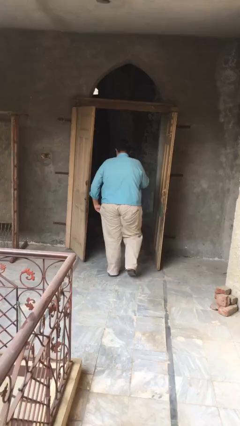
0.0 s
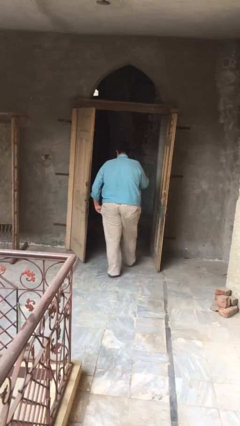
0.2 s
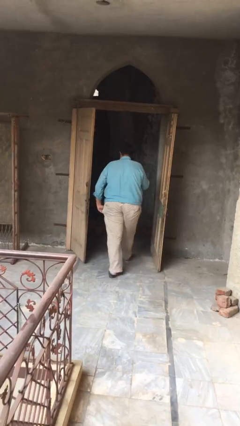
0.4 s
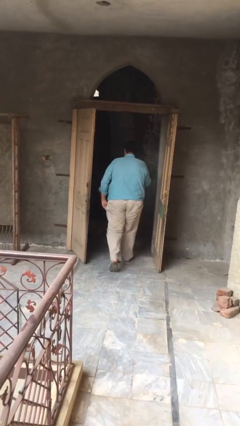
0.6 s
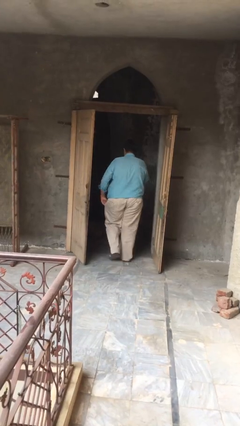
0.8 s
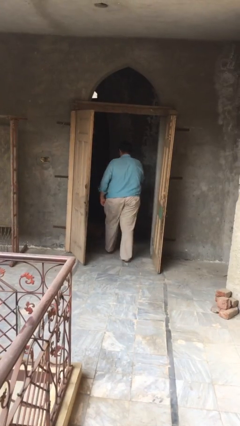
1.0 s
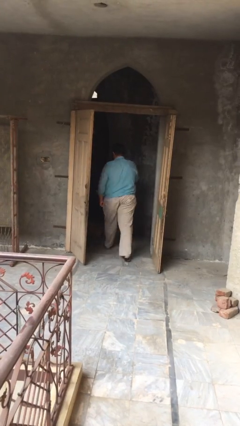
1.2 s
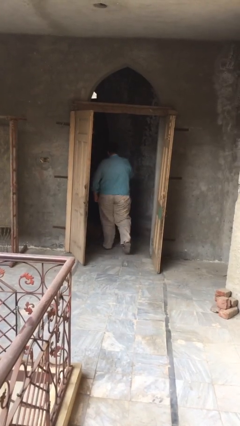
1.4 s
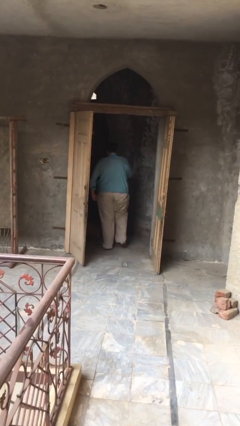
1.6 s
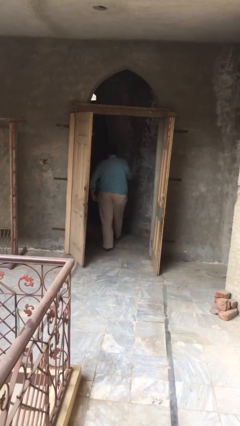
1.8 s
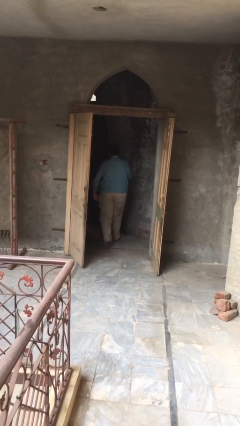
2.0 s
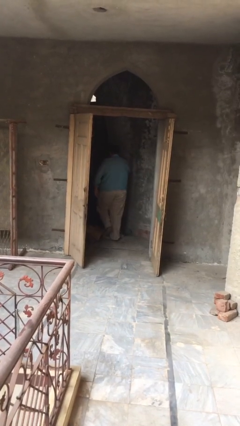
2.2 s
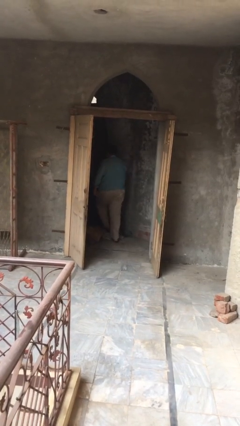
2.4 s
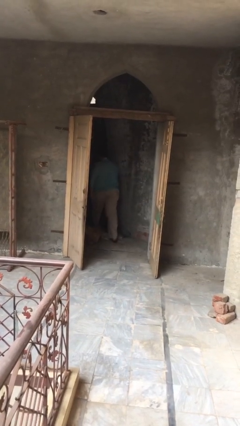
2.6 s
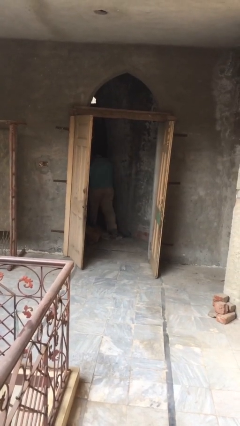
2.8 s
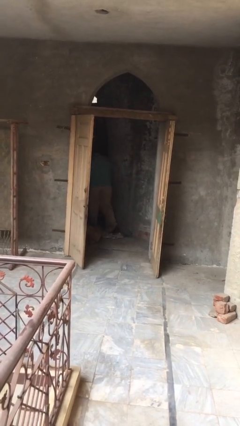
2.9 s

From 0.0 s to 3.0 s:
person exits scene through structure

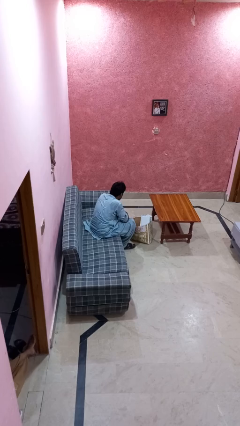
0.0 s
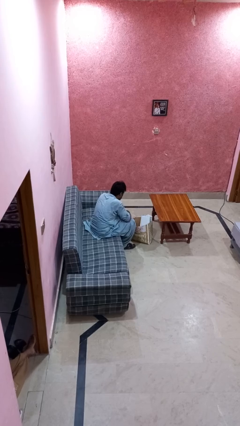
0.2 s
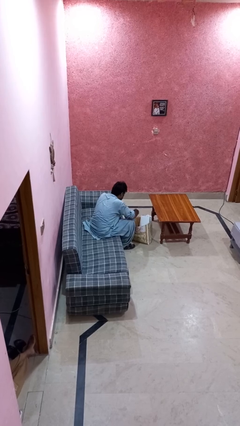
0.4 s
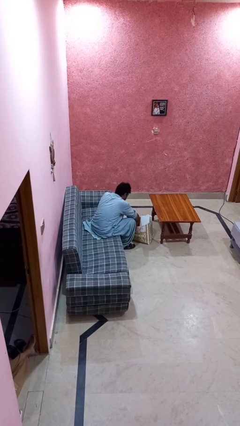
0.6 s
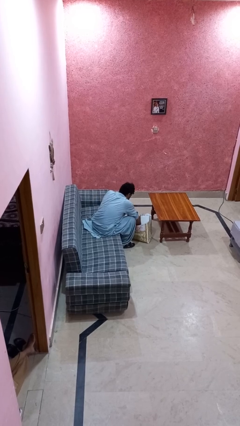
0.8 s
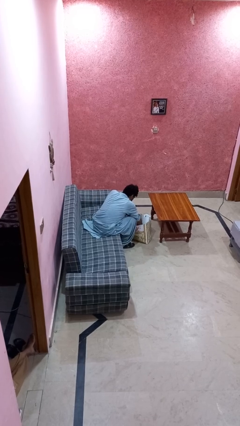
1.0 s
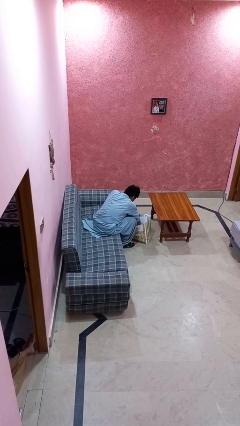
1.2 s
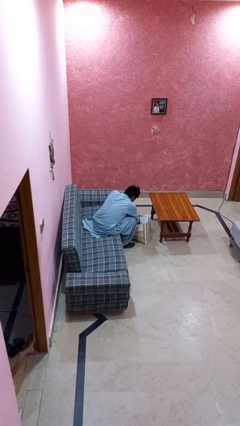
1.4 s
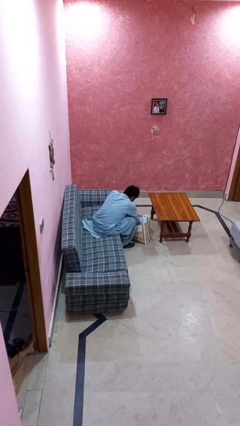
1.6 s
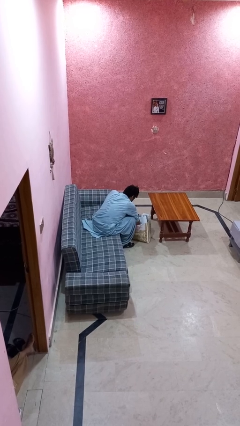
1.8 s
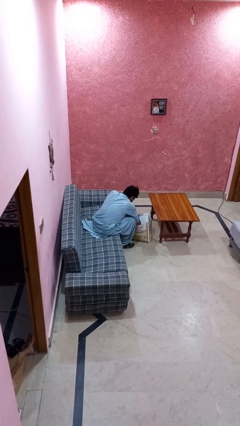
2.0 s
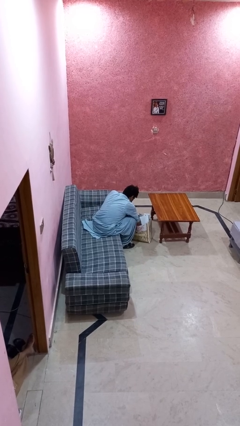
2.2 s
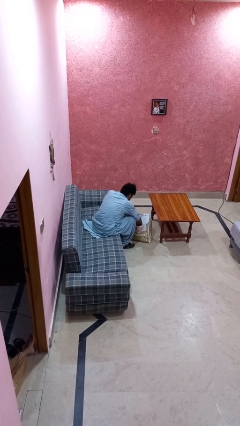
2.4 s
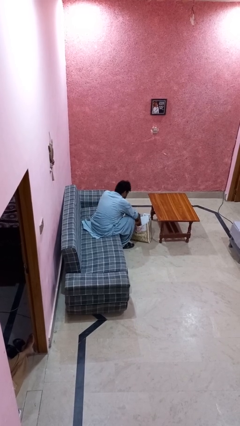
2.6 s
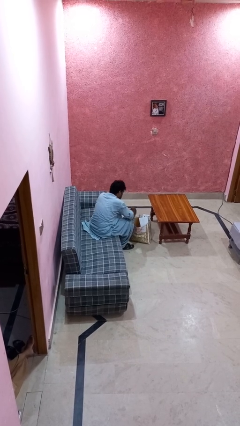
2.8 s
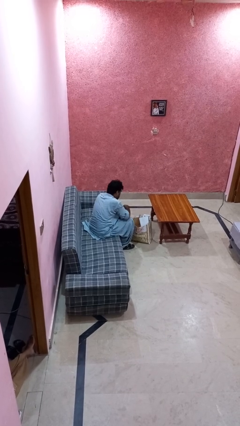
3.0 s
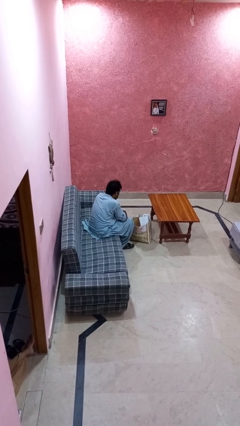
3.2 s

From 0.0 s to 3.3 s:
person searches in bag

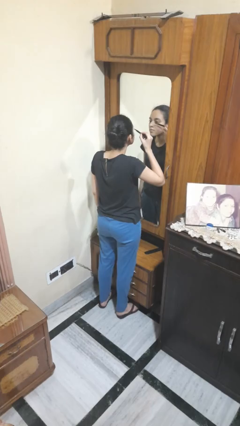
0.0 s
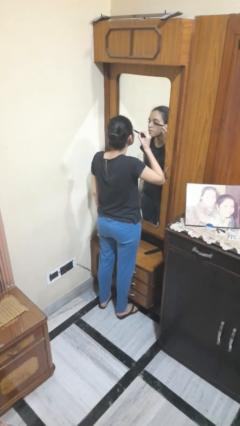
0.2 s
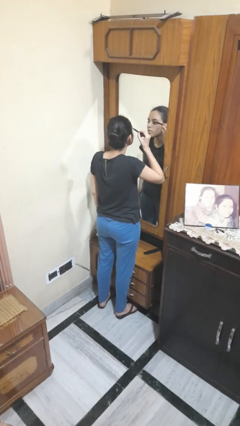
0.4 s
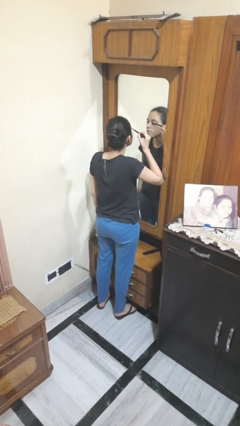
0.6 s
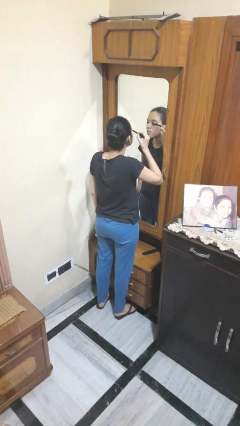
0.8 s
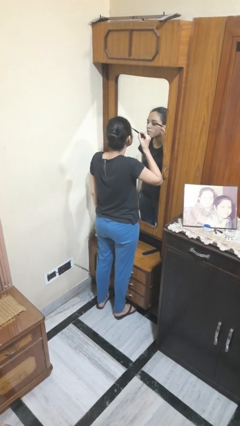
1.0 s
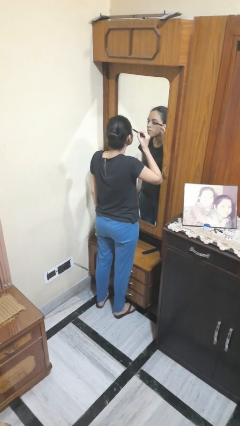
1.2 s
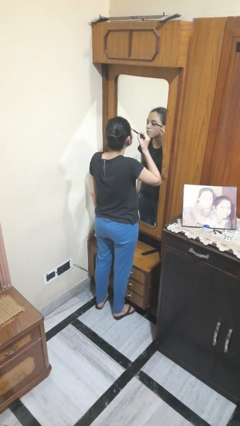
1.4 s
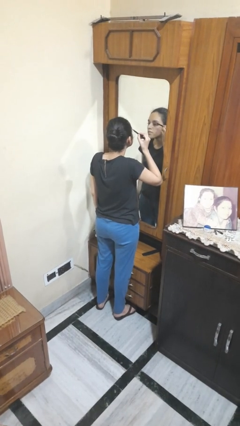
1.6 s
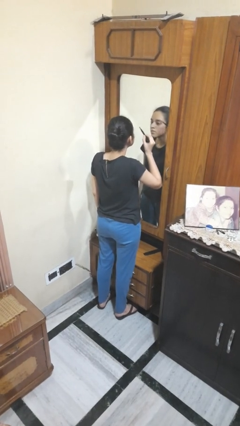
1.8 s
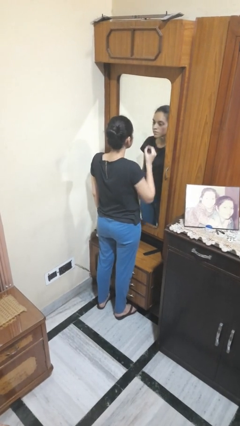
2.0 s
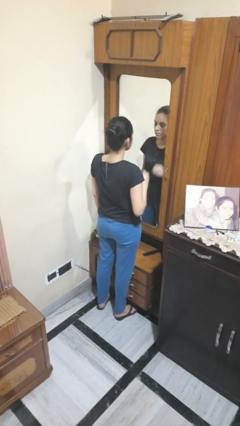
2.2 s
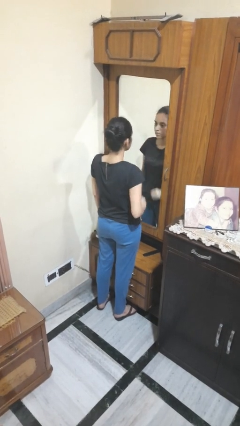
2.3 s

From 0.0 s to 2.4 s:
person applies eye makeup

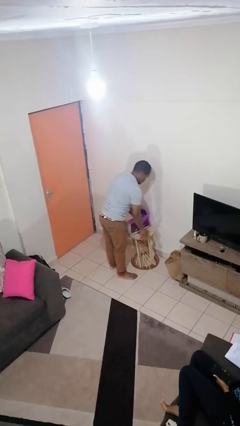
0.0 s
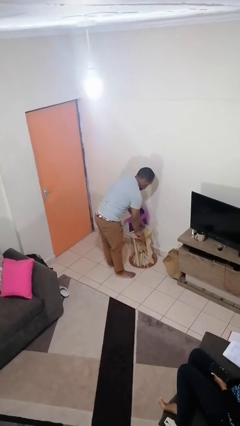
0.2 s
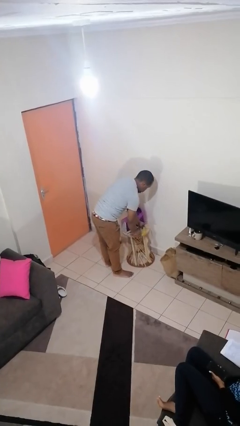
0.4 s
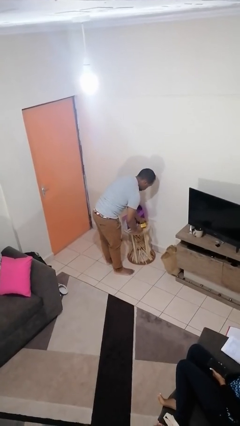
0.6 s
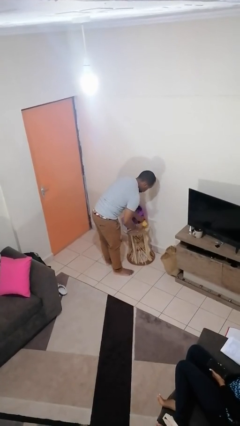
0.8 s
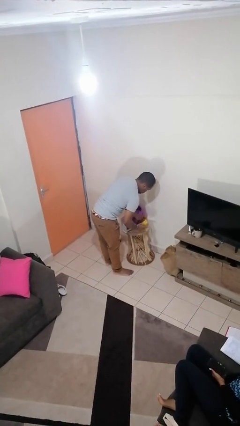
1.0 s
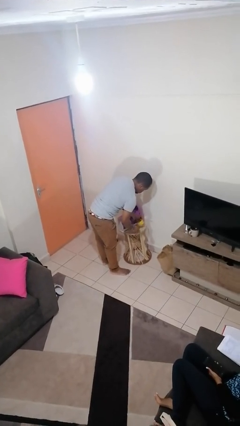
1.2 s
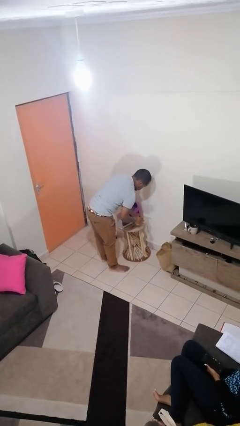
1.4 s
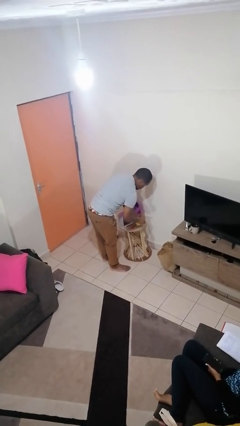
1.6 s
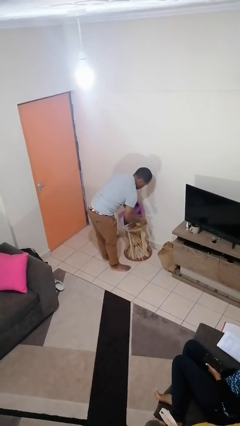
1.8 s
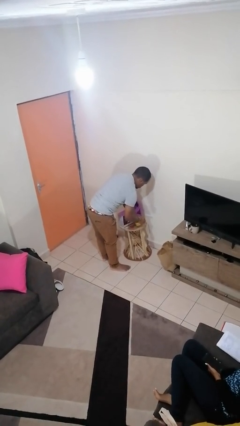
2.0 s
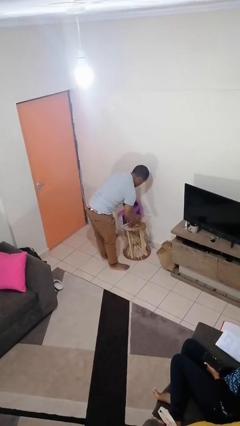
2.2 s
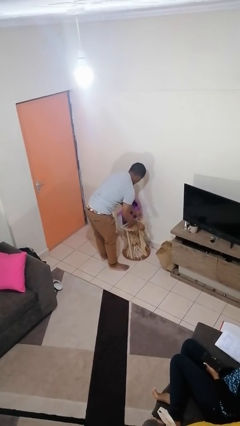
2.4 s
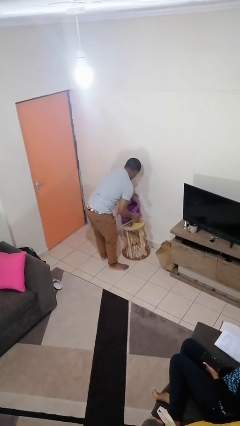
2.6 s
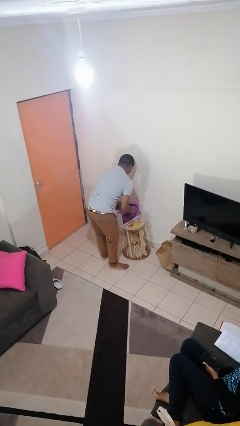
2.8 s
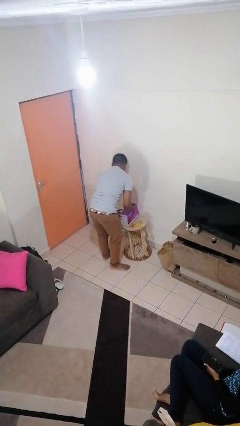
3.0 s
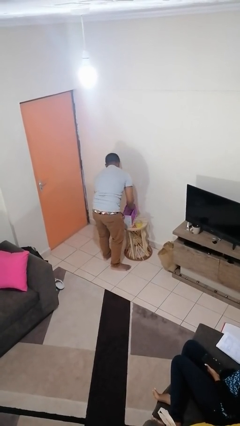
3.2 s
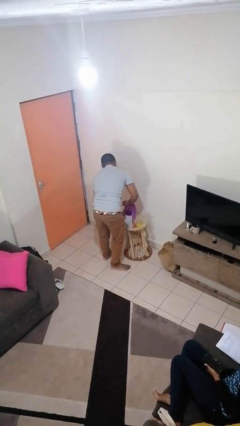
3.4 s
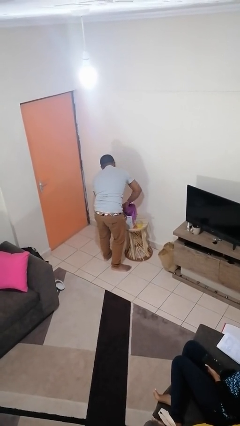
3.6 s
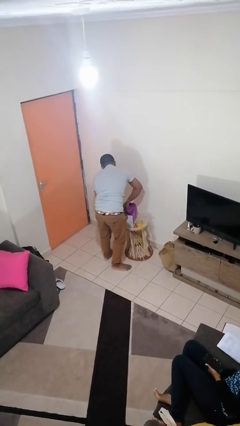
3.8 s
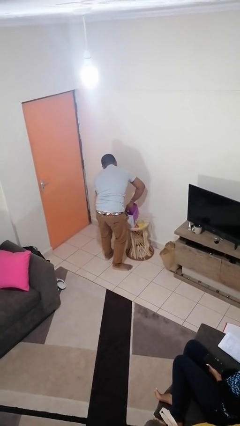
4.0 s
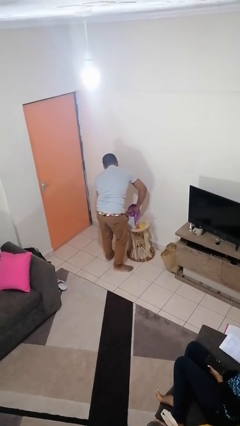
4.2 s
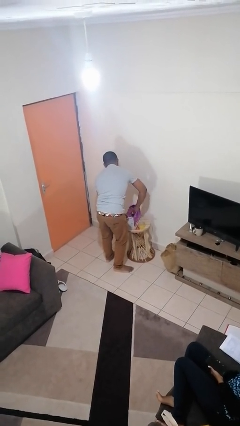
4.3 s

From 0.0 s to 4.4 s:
person wraps box

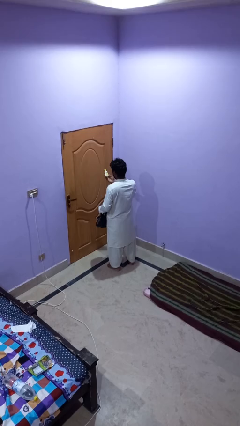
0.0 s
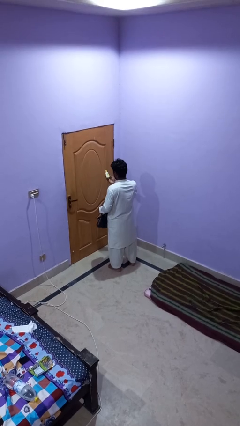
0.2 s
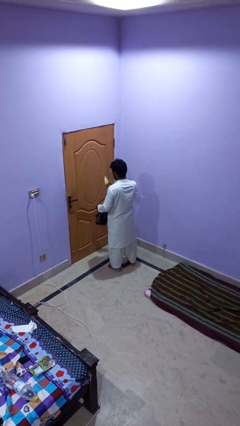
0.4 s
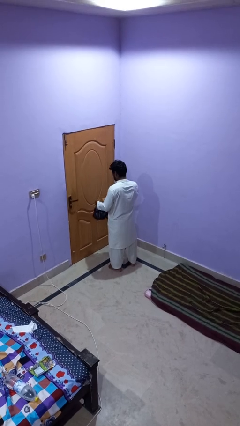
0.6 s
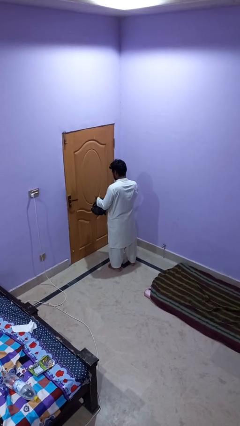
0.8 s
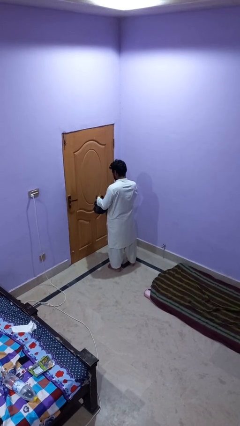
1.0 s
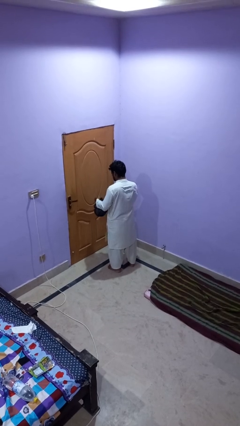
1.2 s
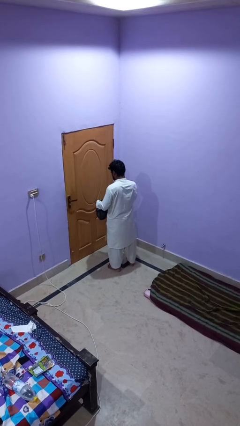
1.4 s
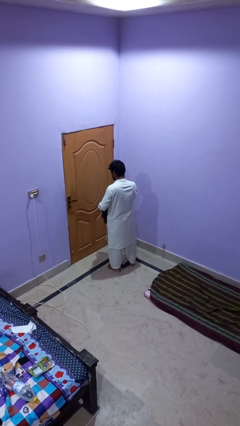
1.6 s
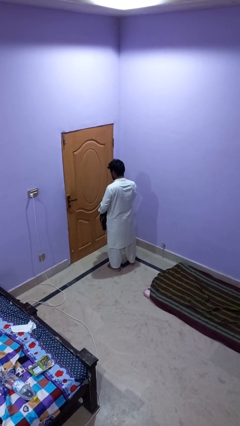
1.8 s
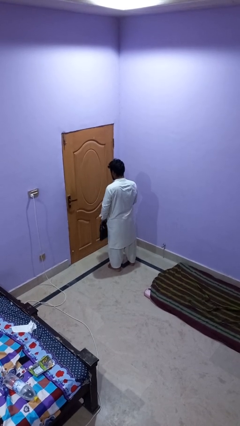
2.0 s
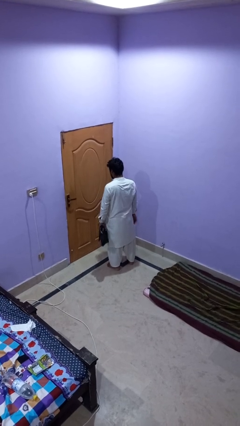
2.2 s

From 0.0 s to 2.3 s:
person puts object into purse

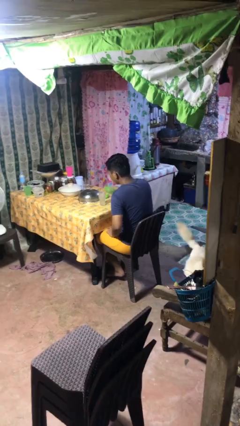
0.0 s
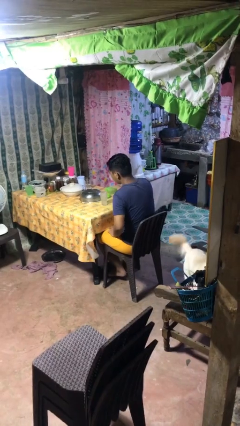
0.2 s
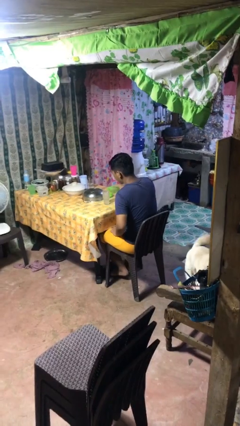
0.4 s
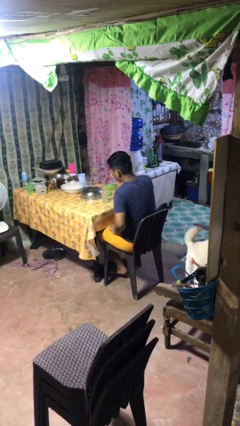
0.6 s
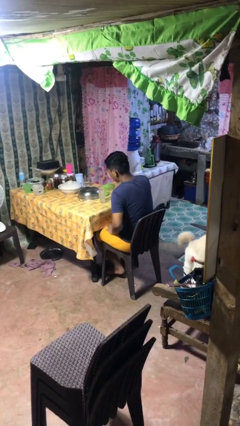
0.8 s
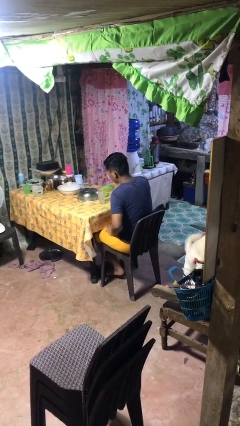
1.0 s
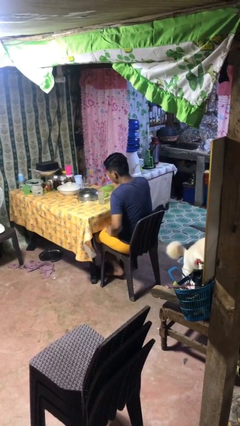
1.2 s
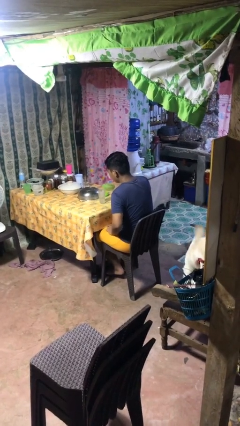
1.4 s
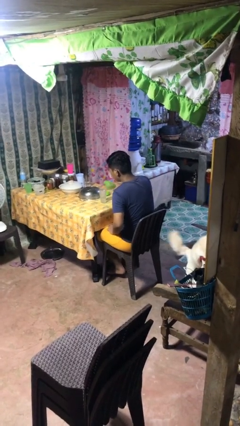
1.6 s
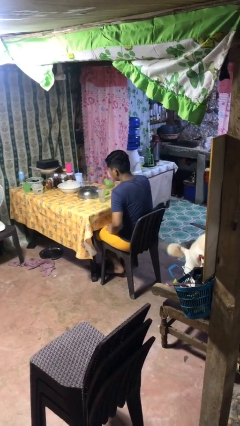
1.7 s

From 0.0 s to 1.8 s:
person pours liquid into cup

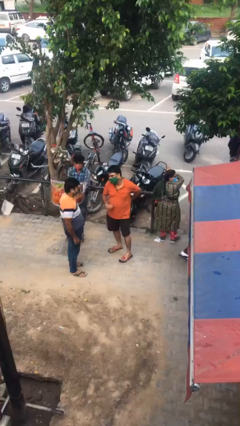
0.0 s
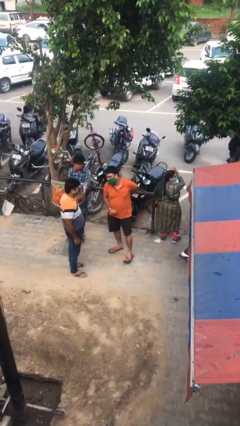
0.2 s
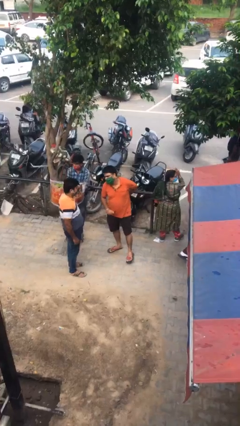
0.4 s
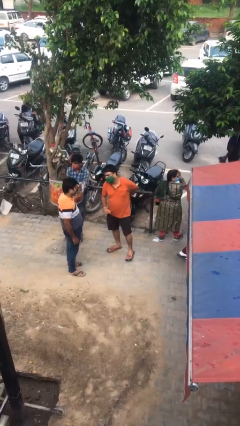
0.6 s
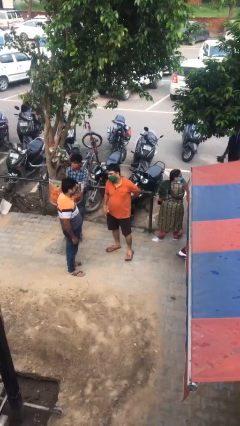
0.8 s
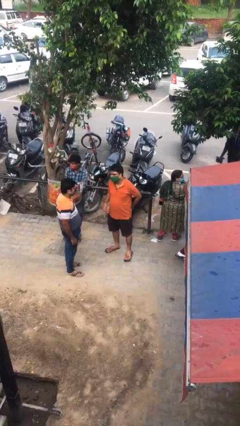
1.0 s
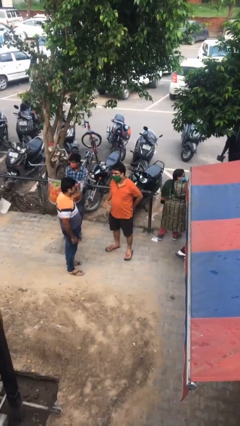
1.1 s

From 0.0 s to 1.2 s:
person talks to person
